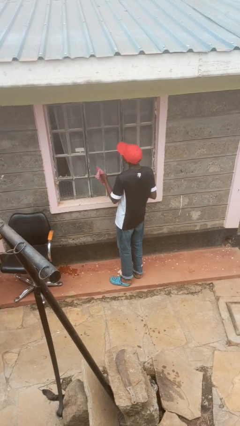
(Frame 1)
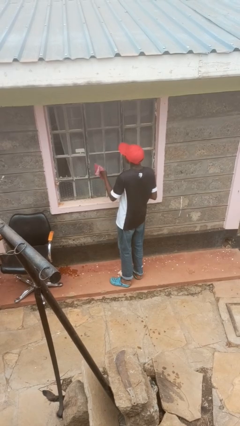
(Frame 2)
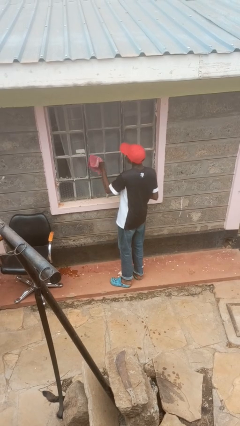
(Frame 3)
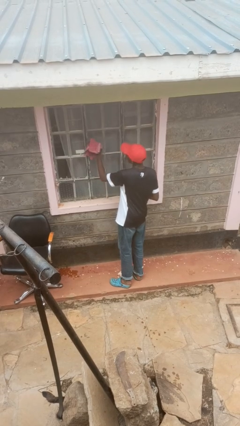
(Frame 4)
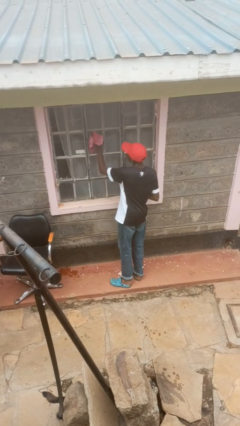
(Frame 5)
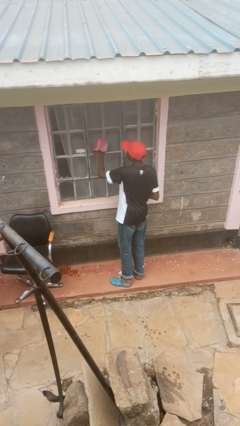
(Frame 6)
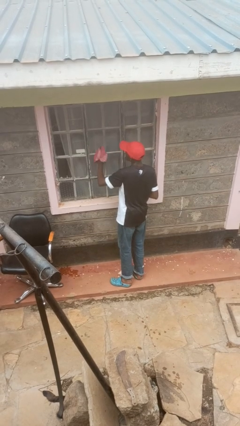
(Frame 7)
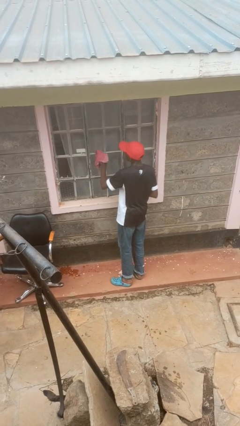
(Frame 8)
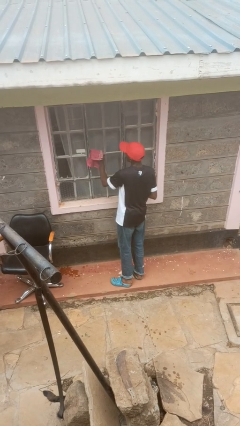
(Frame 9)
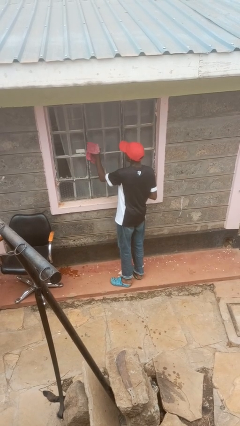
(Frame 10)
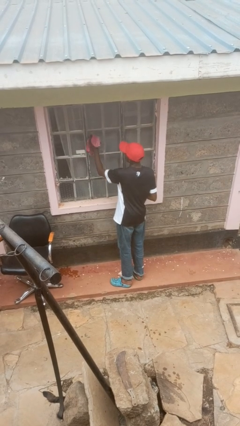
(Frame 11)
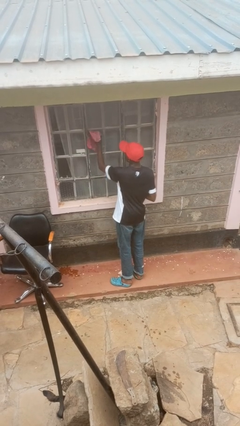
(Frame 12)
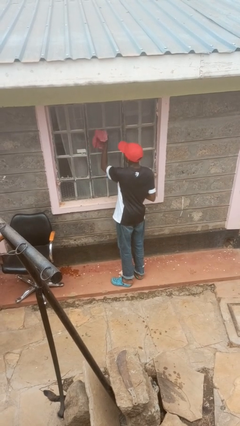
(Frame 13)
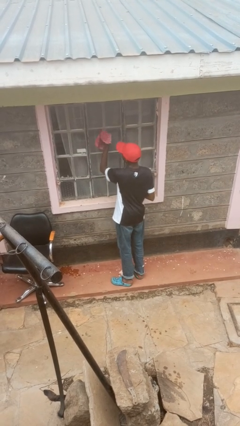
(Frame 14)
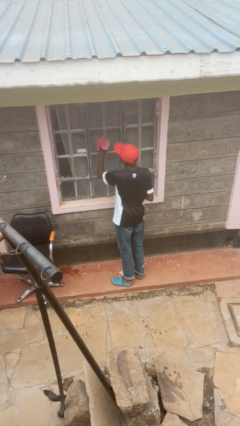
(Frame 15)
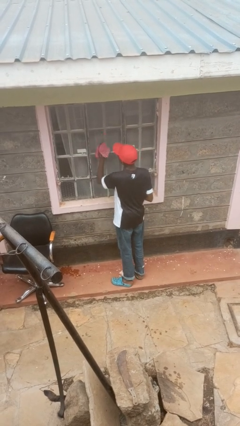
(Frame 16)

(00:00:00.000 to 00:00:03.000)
person washes window

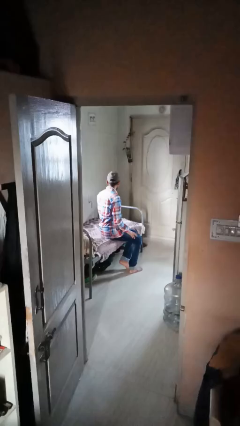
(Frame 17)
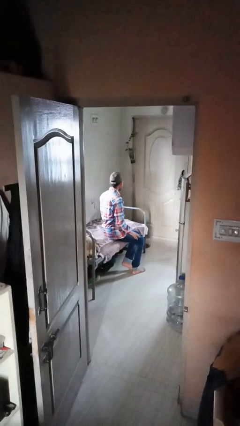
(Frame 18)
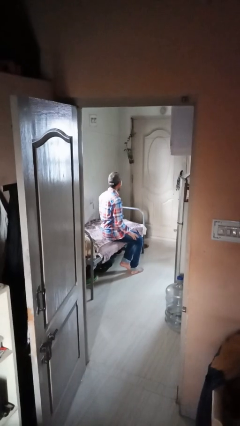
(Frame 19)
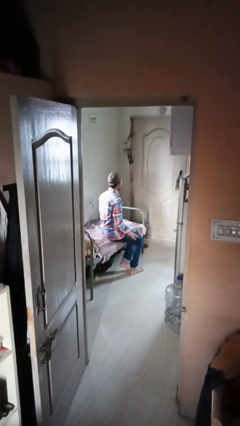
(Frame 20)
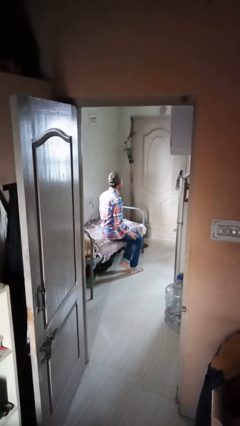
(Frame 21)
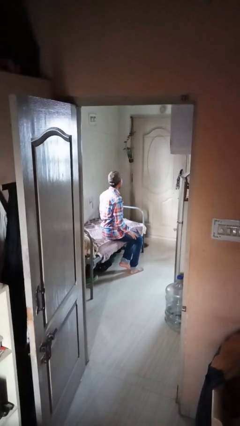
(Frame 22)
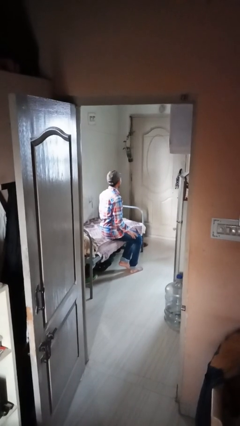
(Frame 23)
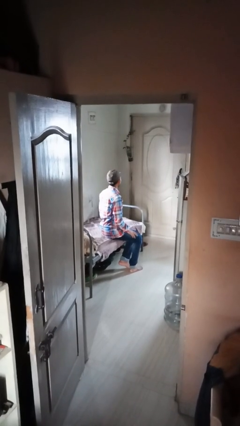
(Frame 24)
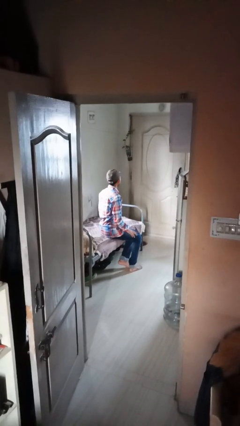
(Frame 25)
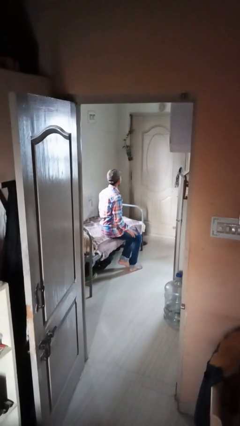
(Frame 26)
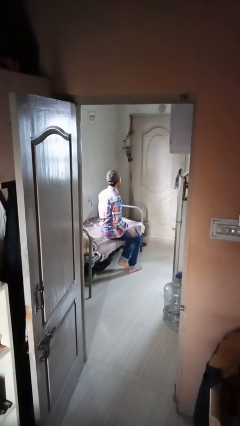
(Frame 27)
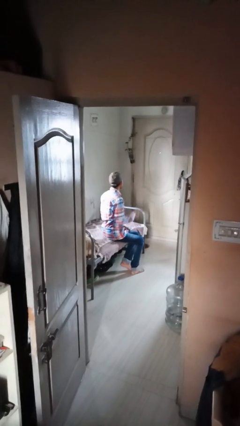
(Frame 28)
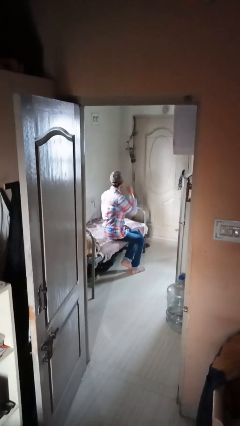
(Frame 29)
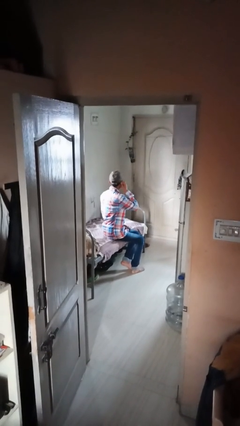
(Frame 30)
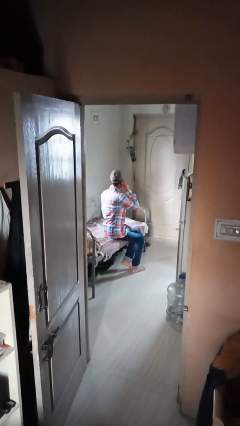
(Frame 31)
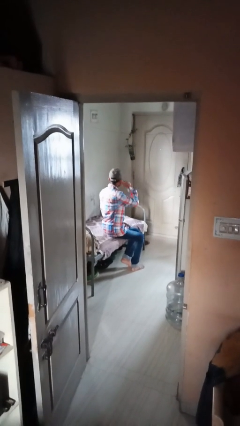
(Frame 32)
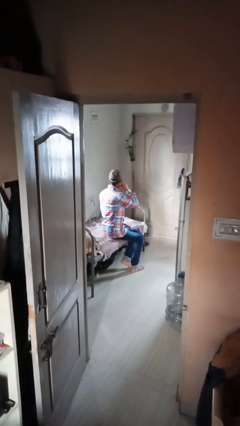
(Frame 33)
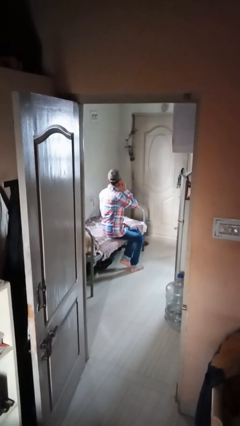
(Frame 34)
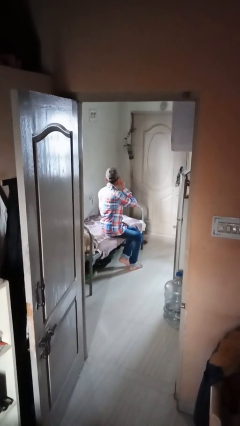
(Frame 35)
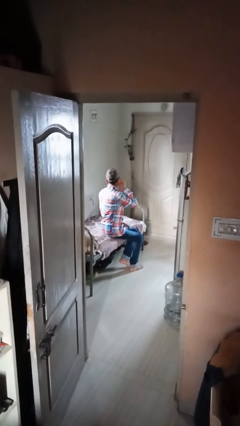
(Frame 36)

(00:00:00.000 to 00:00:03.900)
person puts fingers in ear

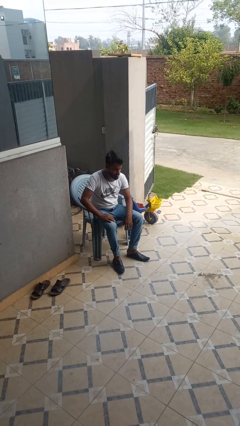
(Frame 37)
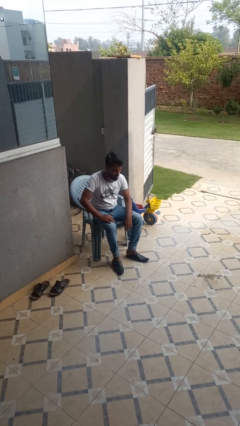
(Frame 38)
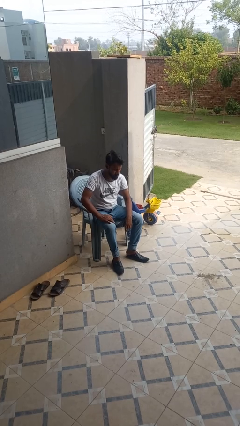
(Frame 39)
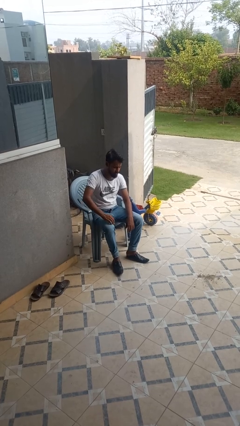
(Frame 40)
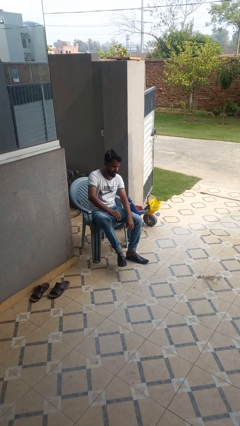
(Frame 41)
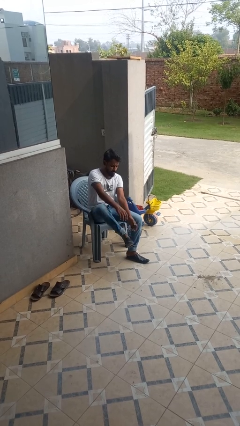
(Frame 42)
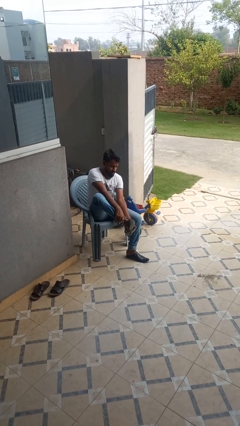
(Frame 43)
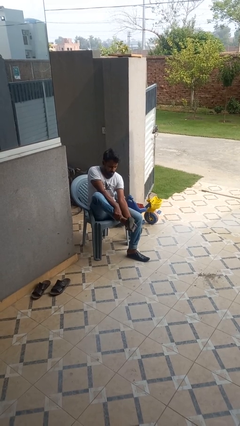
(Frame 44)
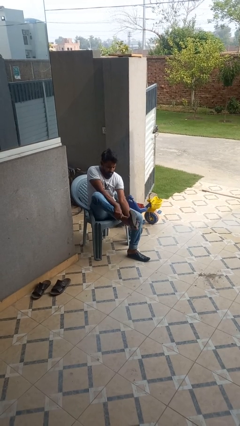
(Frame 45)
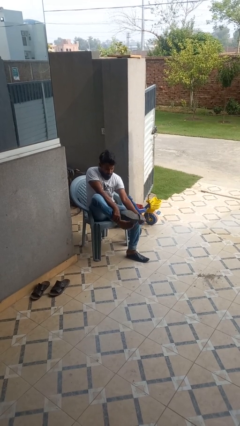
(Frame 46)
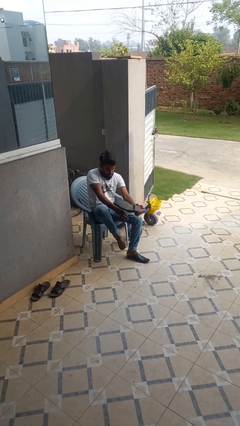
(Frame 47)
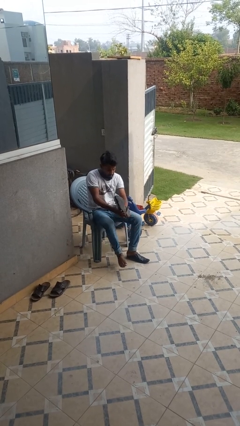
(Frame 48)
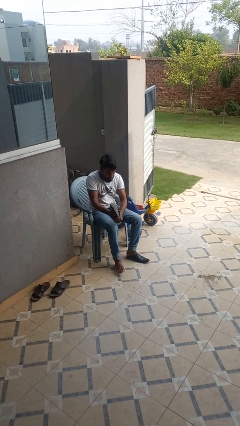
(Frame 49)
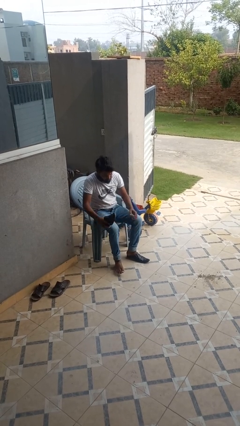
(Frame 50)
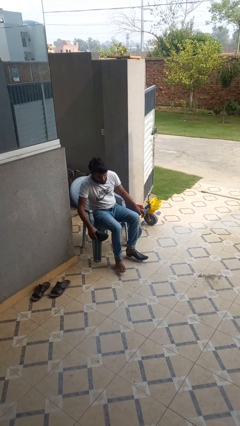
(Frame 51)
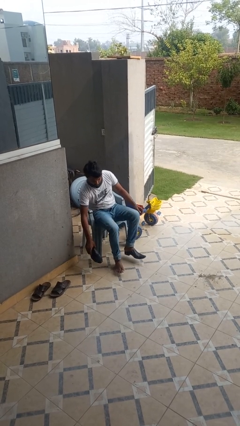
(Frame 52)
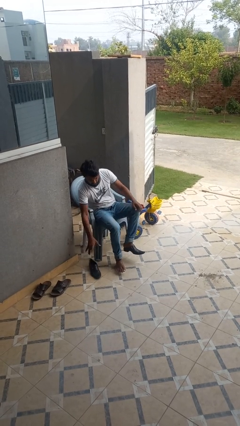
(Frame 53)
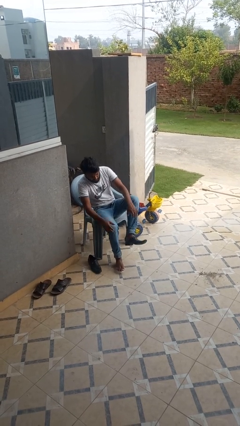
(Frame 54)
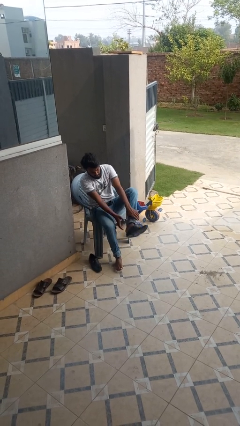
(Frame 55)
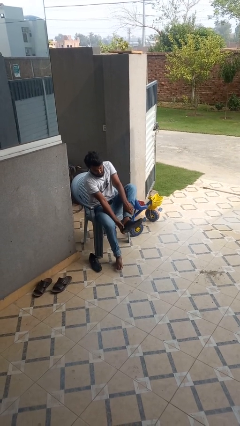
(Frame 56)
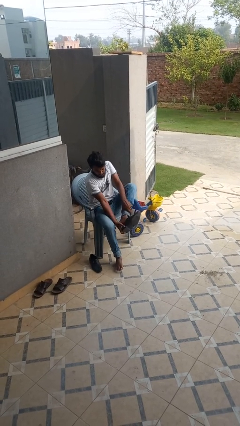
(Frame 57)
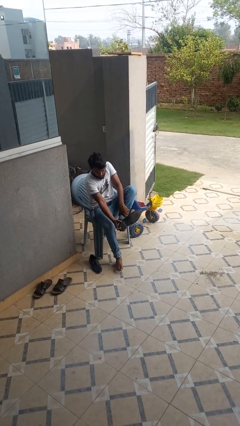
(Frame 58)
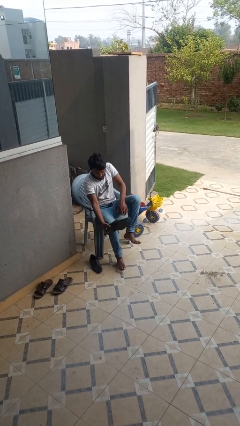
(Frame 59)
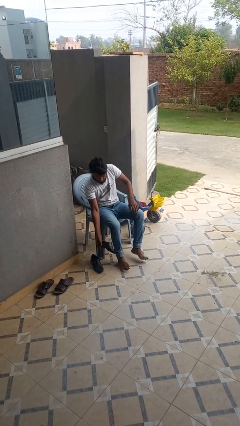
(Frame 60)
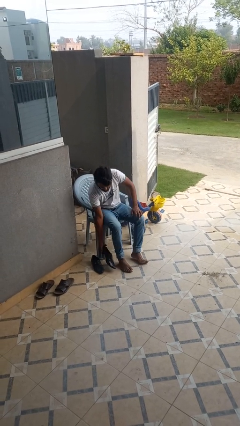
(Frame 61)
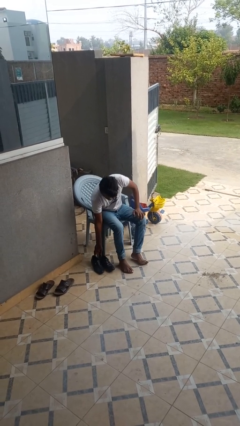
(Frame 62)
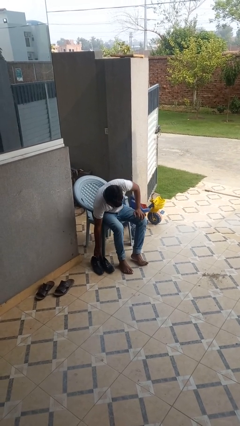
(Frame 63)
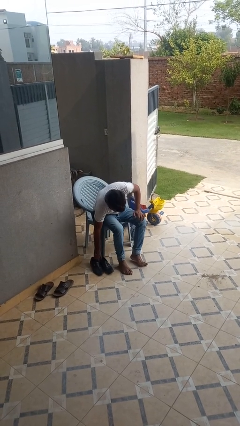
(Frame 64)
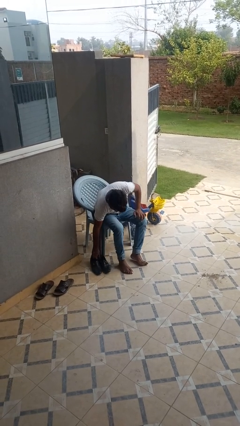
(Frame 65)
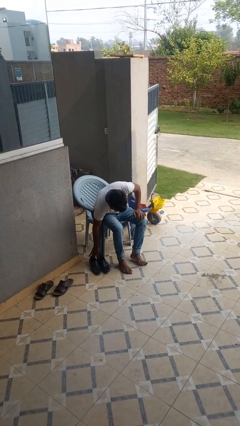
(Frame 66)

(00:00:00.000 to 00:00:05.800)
person takes off shoes

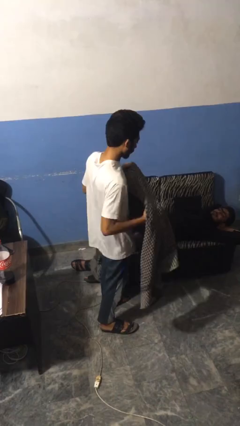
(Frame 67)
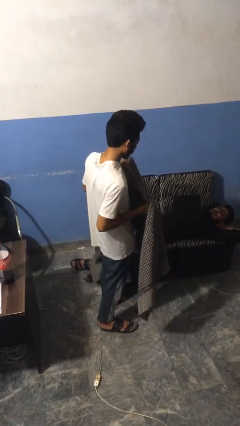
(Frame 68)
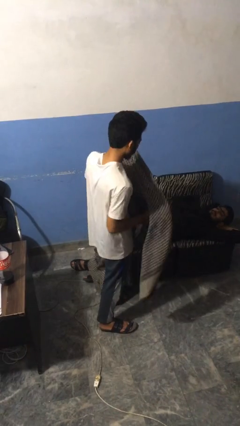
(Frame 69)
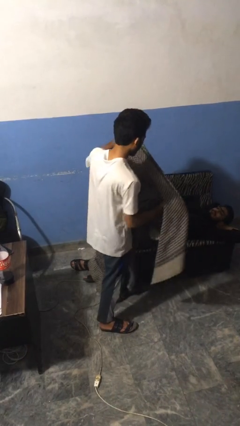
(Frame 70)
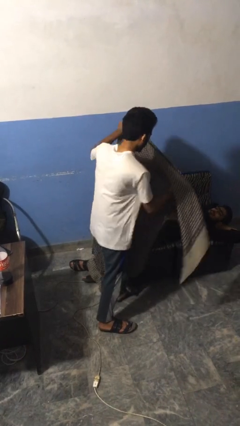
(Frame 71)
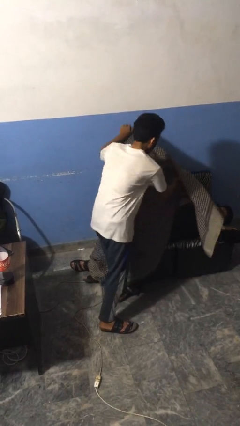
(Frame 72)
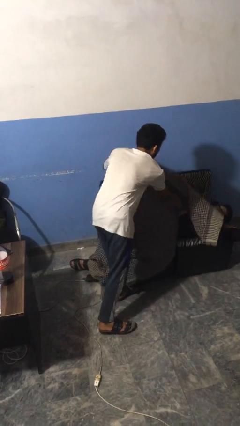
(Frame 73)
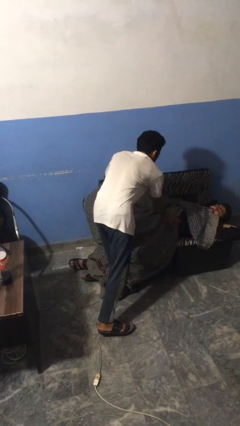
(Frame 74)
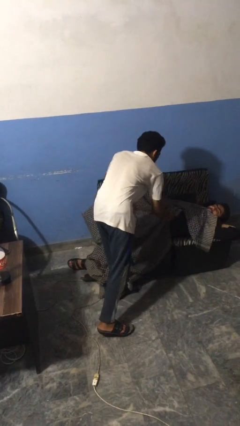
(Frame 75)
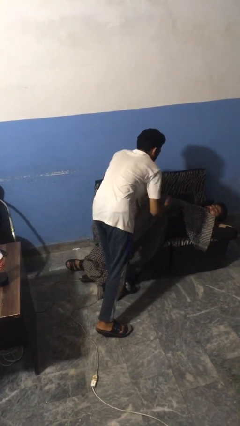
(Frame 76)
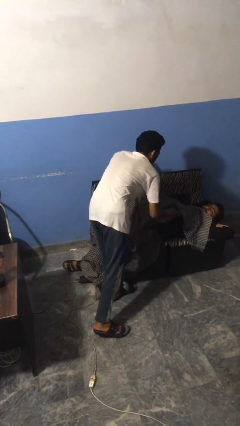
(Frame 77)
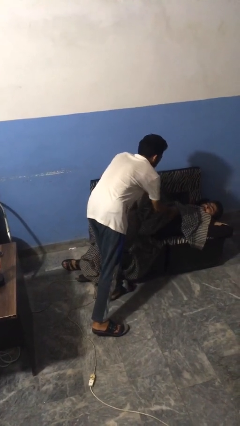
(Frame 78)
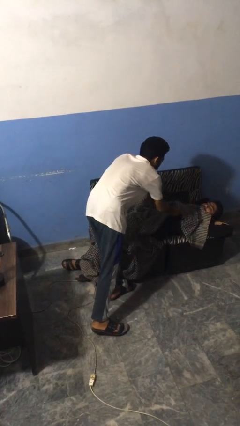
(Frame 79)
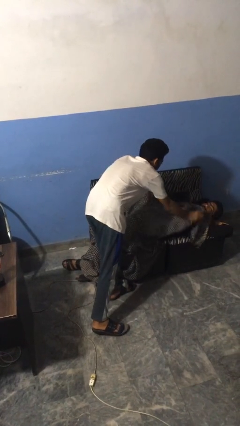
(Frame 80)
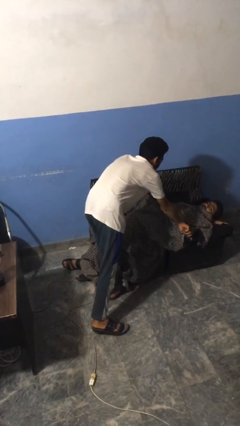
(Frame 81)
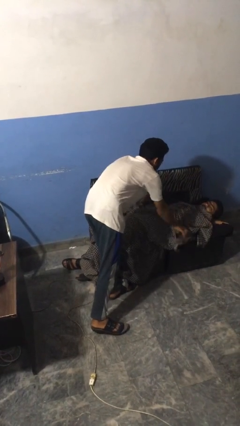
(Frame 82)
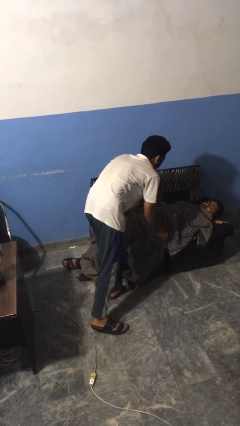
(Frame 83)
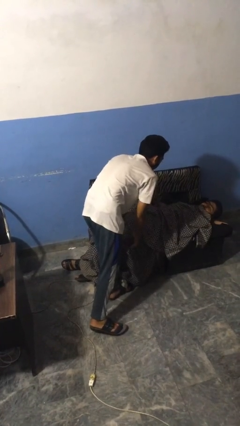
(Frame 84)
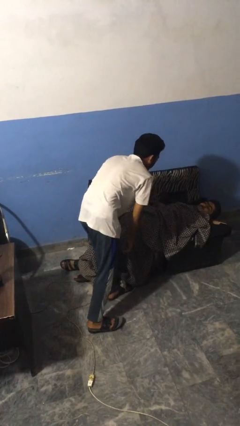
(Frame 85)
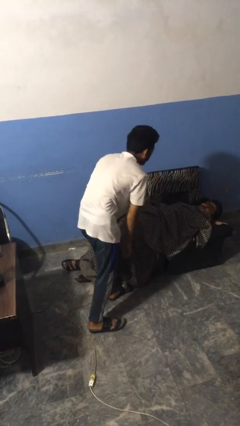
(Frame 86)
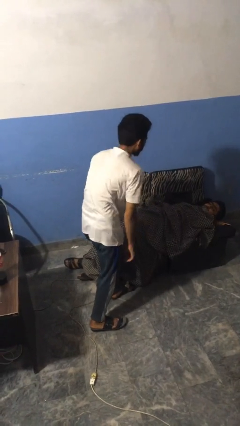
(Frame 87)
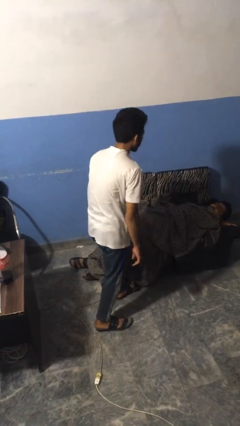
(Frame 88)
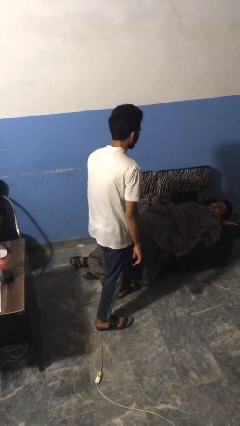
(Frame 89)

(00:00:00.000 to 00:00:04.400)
person covers friend with blanket

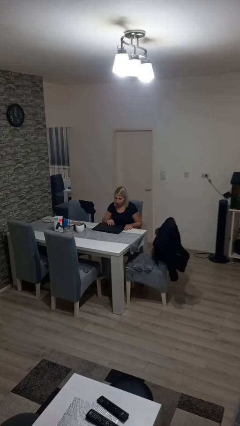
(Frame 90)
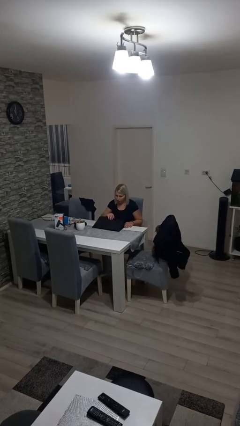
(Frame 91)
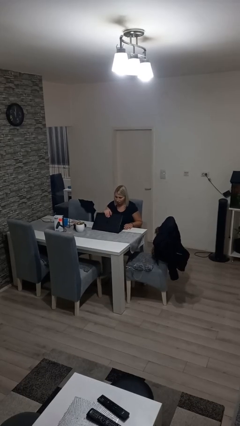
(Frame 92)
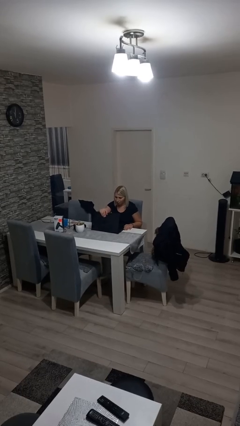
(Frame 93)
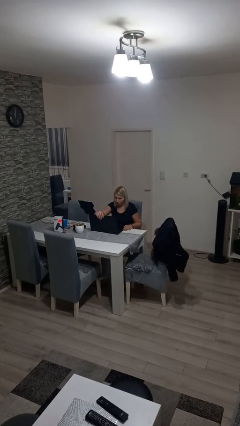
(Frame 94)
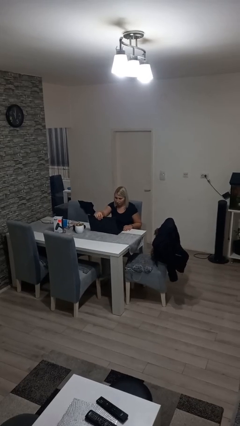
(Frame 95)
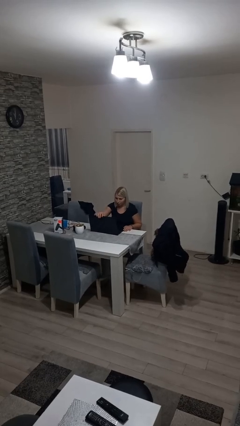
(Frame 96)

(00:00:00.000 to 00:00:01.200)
person opens laptop
